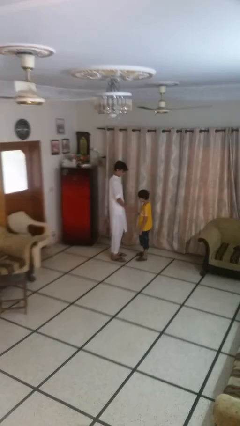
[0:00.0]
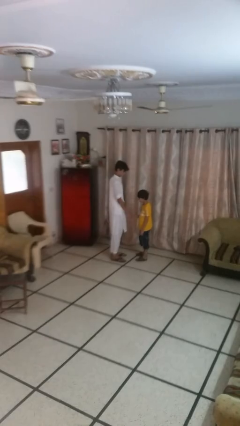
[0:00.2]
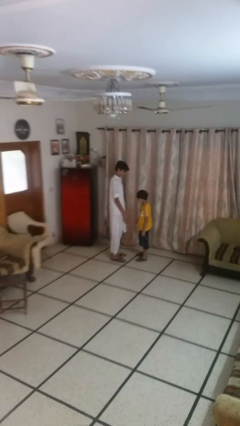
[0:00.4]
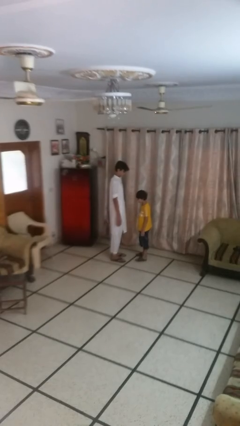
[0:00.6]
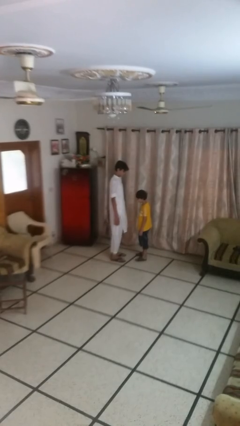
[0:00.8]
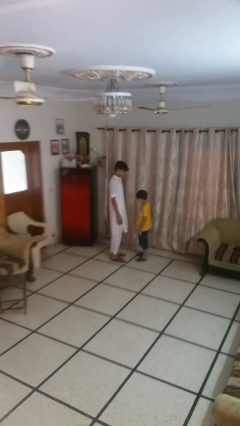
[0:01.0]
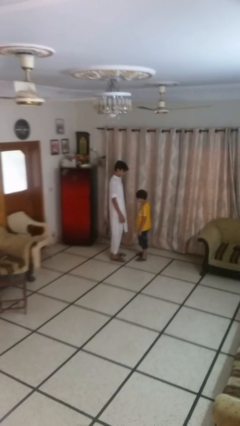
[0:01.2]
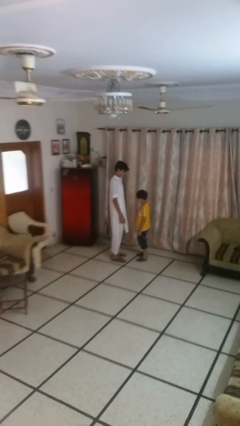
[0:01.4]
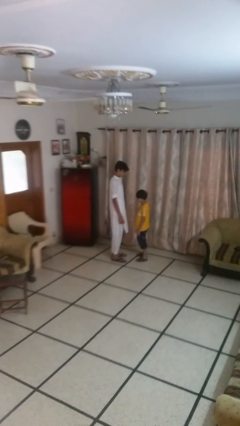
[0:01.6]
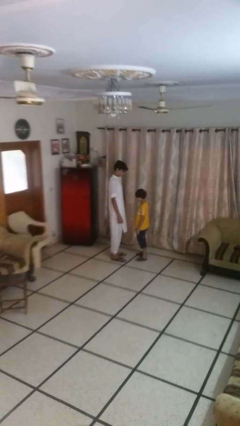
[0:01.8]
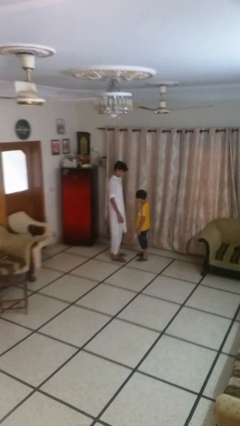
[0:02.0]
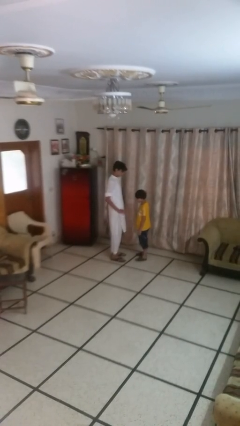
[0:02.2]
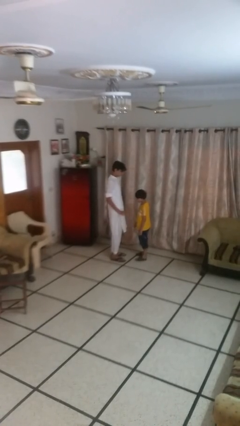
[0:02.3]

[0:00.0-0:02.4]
person highfives hand

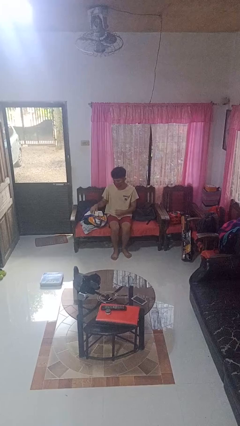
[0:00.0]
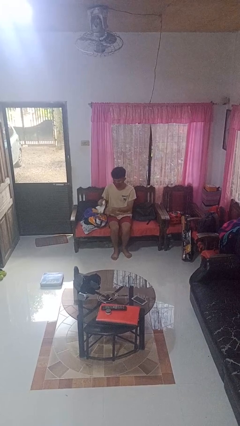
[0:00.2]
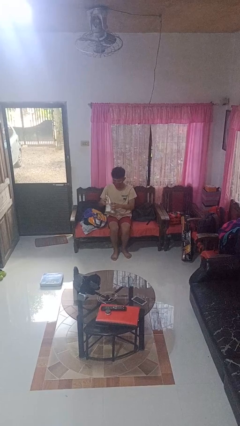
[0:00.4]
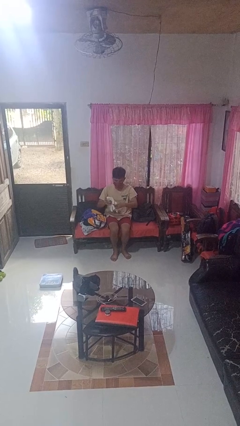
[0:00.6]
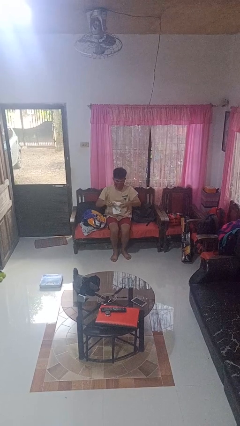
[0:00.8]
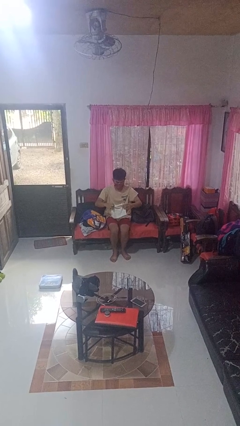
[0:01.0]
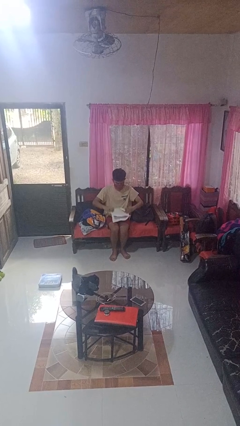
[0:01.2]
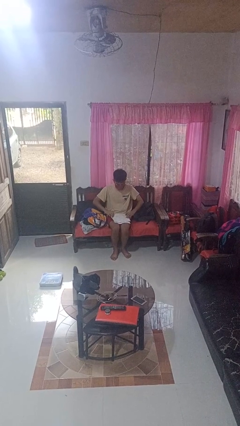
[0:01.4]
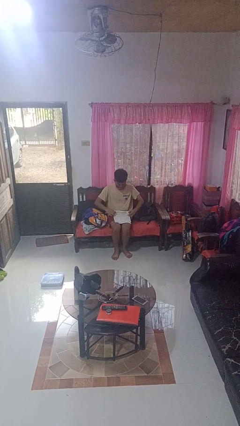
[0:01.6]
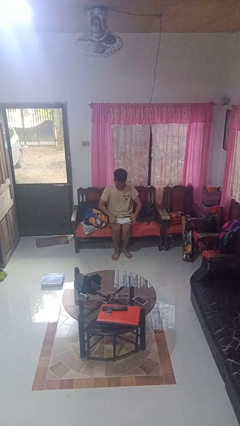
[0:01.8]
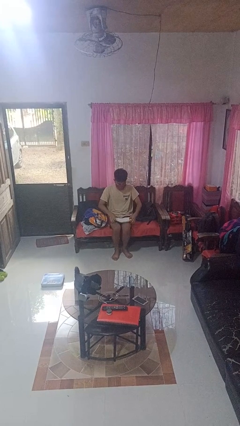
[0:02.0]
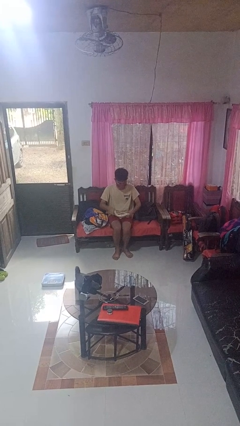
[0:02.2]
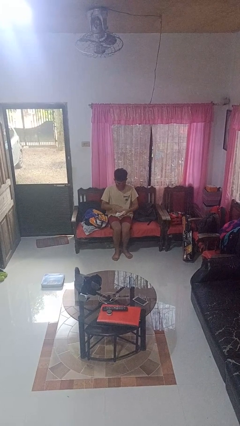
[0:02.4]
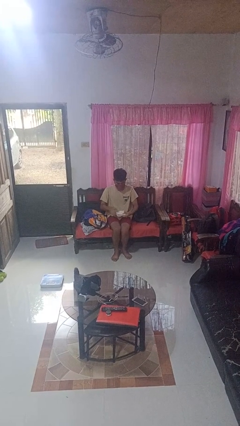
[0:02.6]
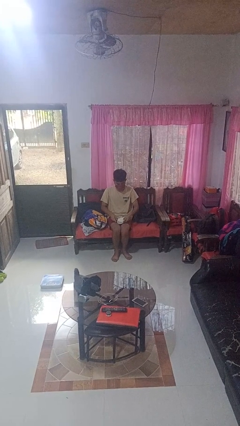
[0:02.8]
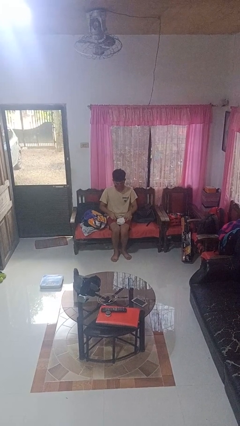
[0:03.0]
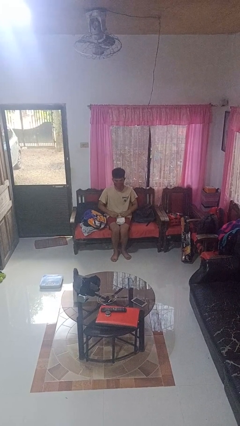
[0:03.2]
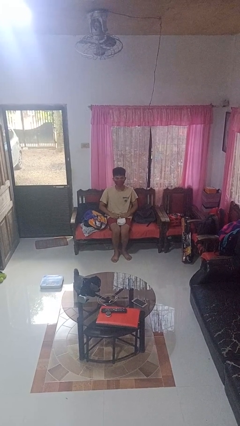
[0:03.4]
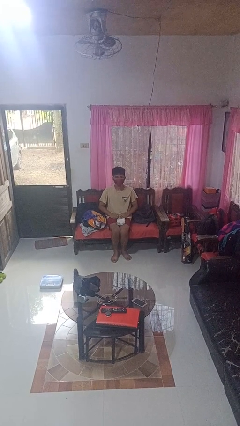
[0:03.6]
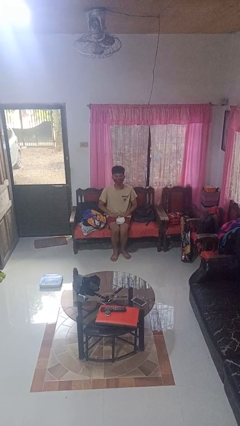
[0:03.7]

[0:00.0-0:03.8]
person folds towel

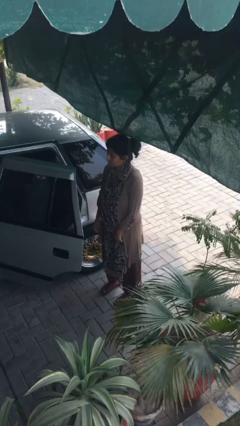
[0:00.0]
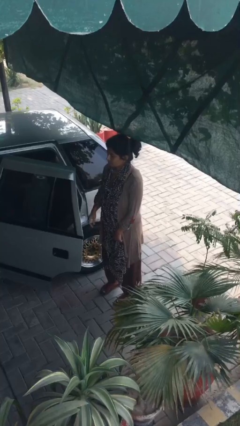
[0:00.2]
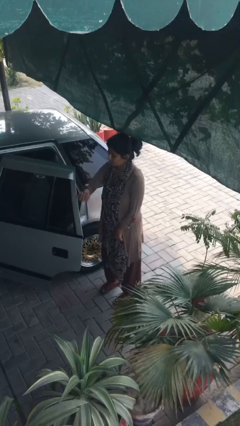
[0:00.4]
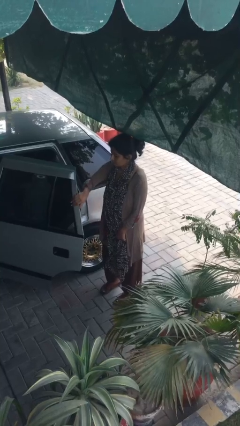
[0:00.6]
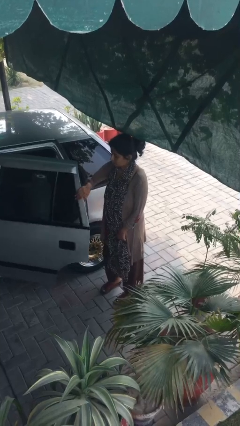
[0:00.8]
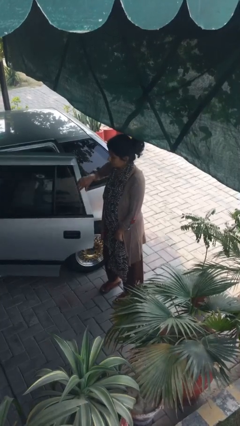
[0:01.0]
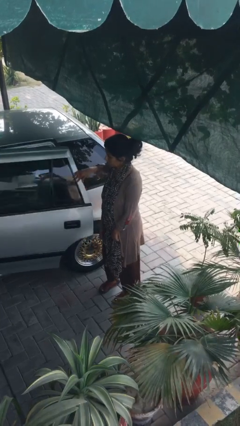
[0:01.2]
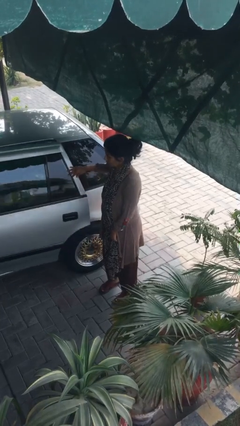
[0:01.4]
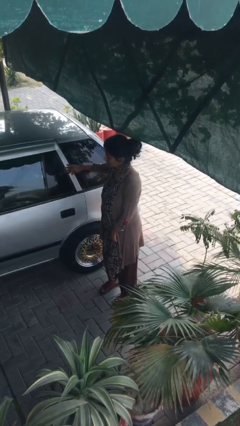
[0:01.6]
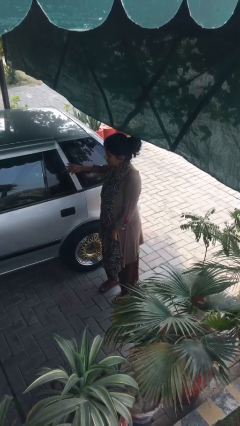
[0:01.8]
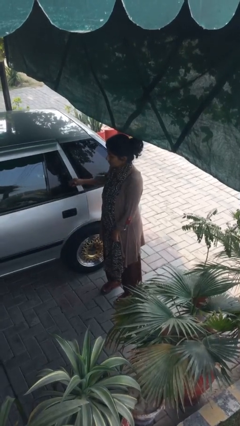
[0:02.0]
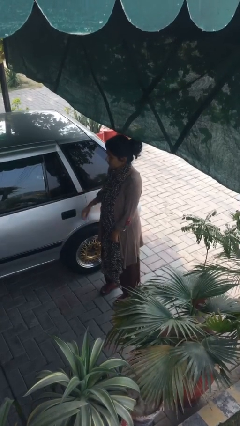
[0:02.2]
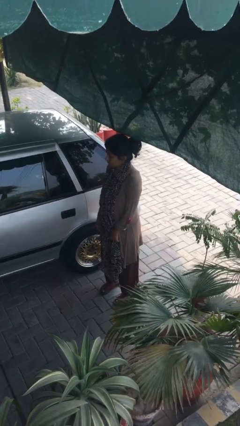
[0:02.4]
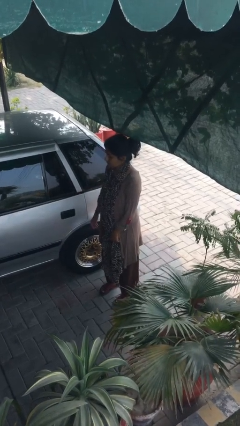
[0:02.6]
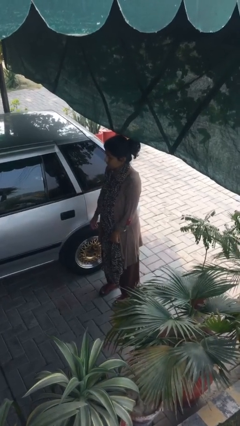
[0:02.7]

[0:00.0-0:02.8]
person closes car door

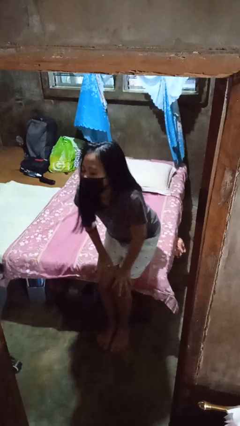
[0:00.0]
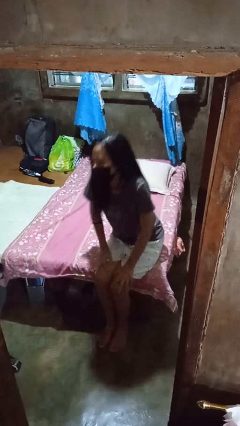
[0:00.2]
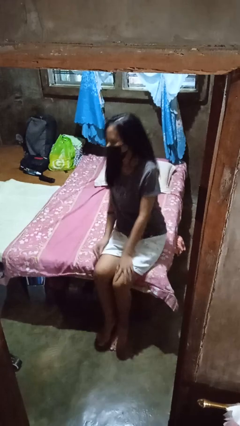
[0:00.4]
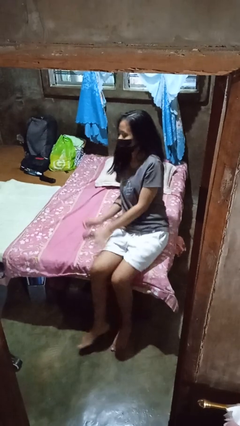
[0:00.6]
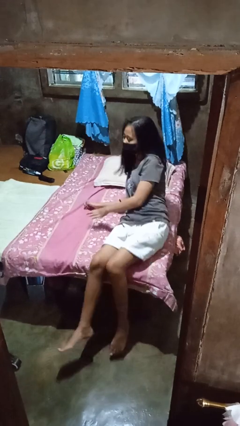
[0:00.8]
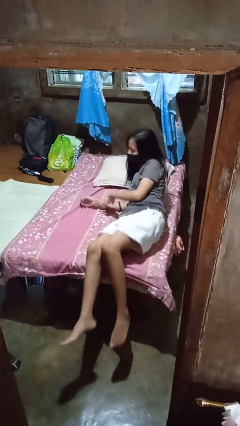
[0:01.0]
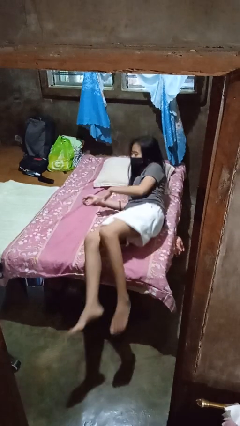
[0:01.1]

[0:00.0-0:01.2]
person lies down on bed

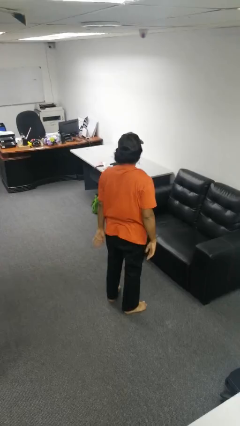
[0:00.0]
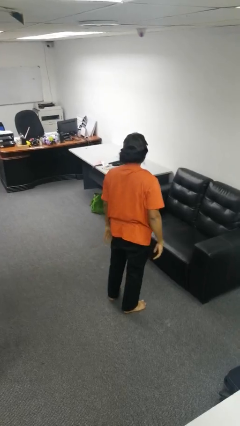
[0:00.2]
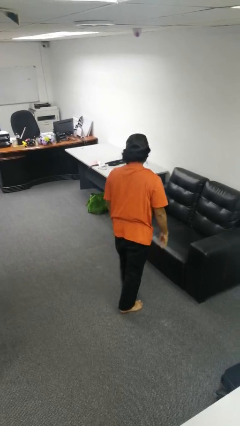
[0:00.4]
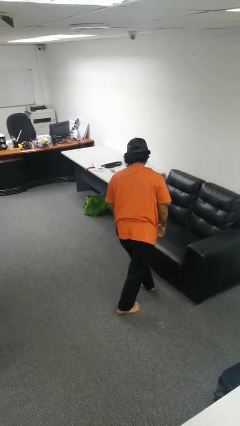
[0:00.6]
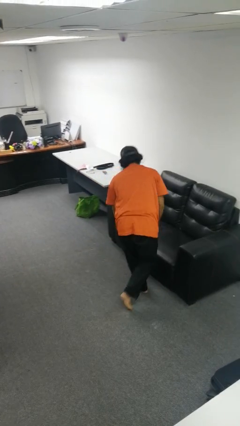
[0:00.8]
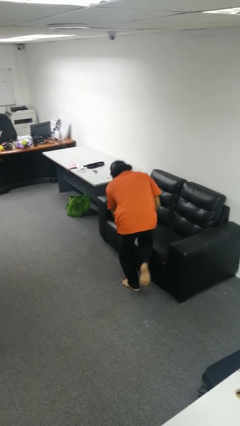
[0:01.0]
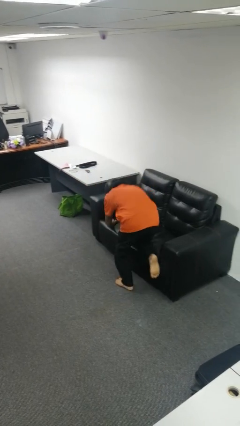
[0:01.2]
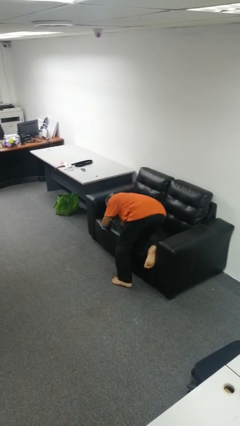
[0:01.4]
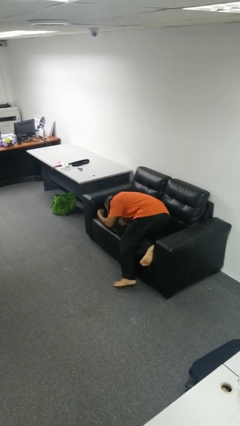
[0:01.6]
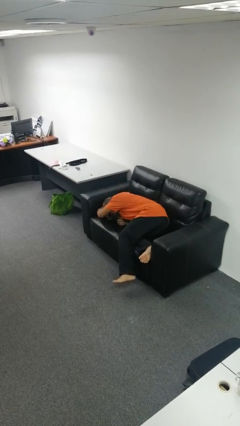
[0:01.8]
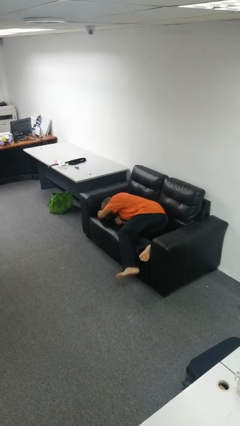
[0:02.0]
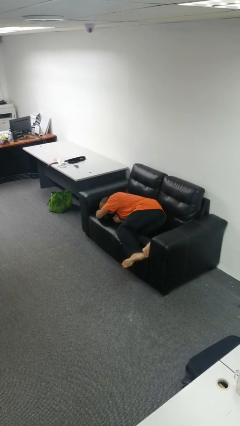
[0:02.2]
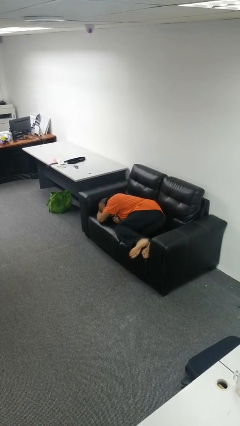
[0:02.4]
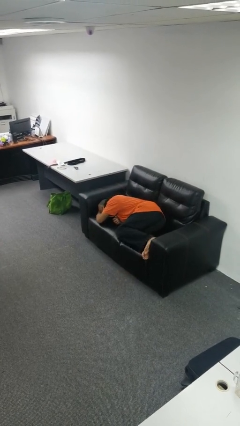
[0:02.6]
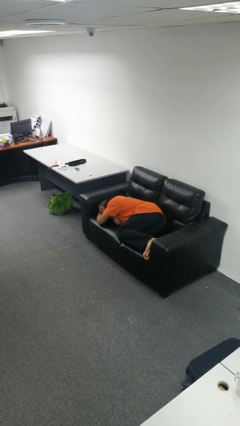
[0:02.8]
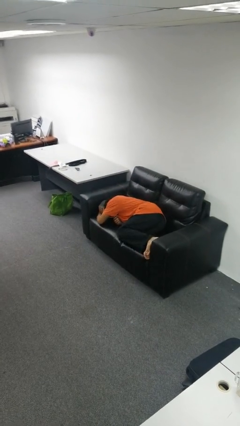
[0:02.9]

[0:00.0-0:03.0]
person lies down on couch

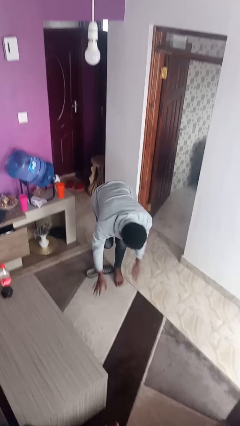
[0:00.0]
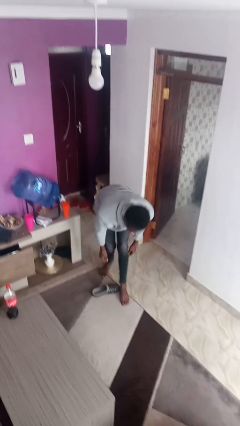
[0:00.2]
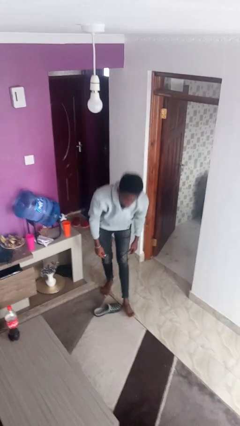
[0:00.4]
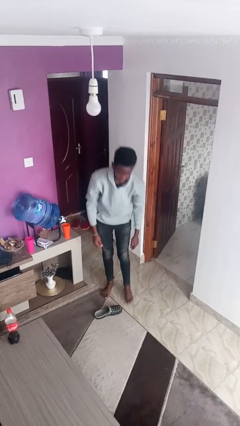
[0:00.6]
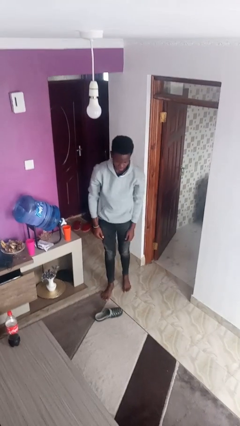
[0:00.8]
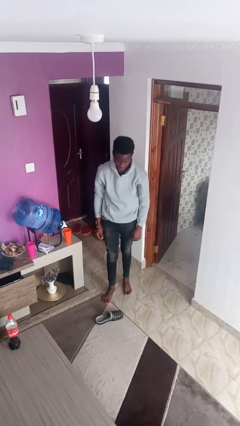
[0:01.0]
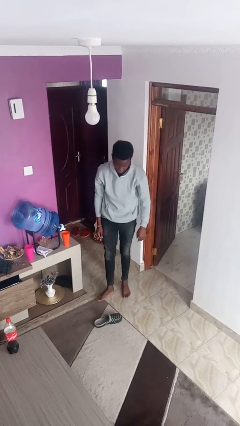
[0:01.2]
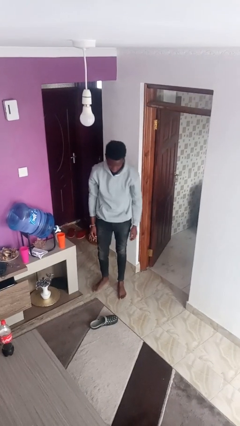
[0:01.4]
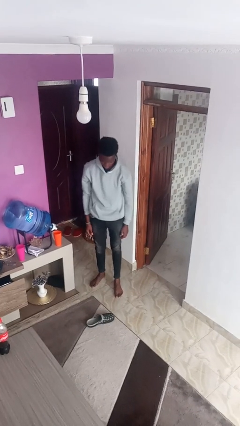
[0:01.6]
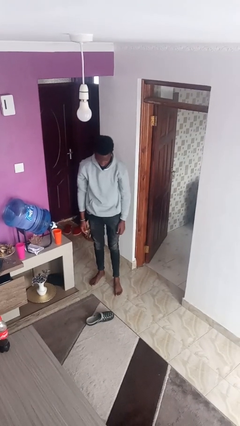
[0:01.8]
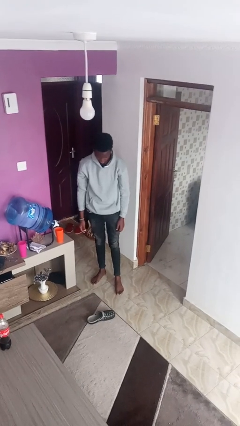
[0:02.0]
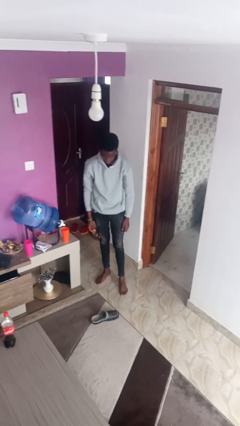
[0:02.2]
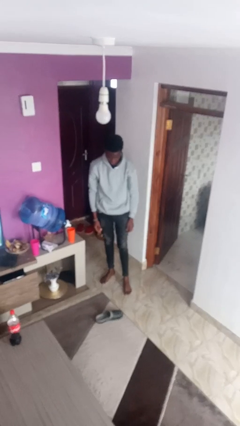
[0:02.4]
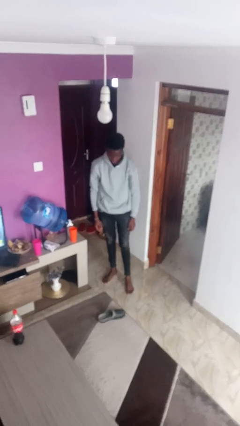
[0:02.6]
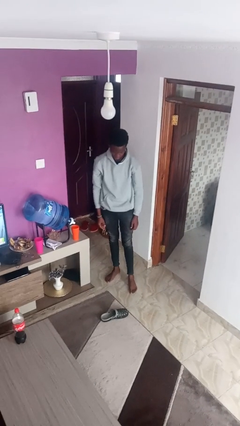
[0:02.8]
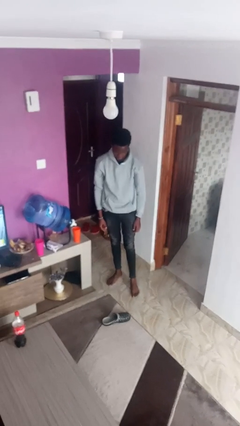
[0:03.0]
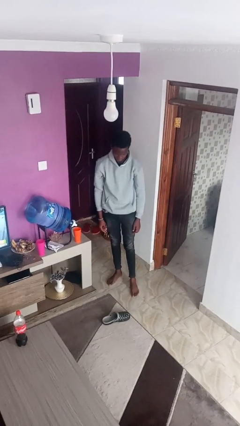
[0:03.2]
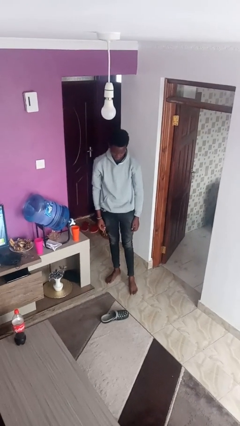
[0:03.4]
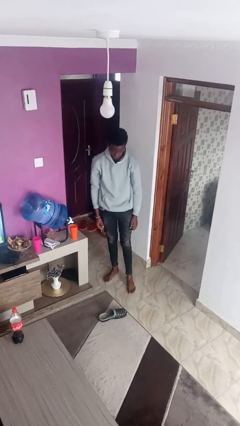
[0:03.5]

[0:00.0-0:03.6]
person stands up from floor

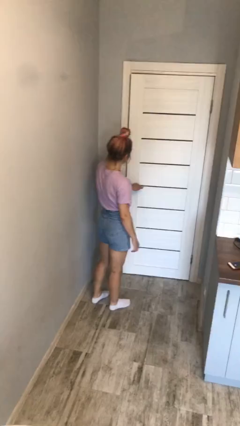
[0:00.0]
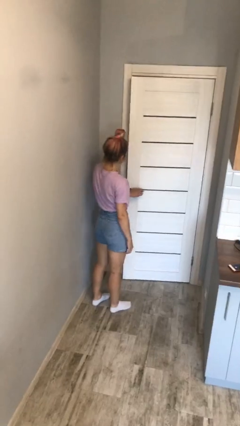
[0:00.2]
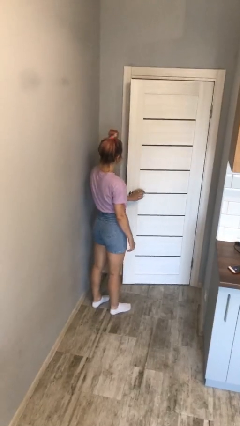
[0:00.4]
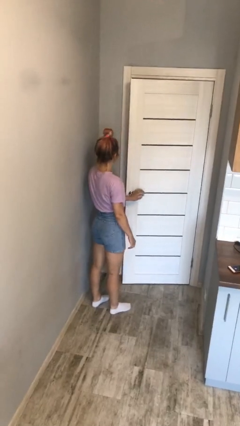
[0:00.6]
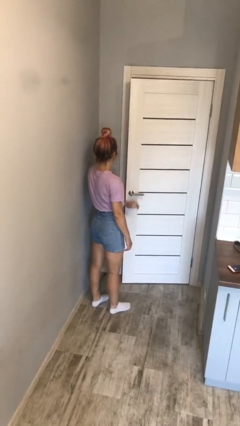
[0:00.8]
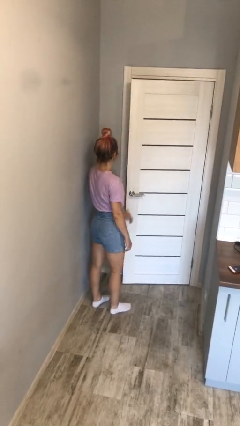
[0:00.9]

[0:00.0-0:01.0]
person opens facility door
